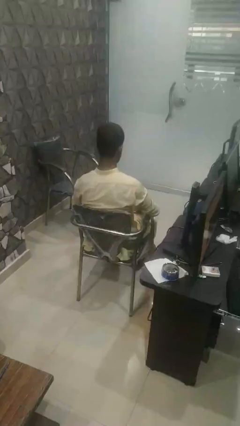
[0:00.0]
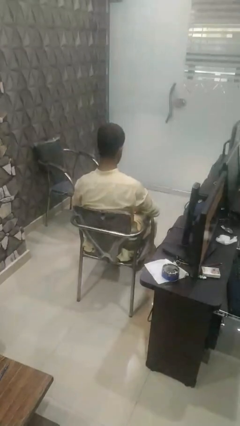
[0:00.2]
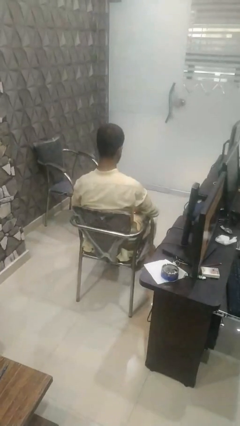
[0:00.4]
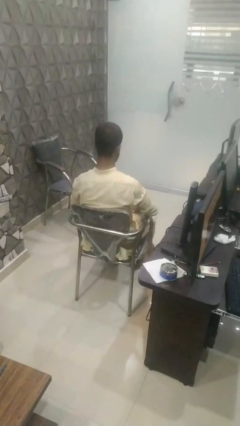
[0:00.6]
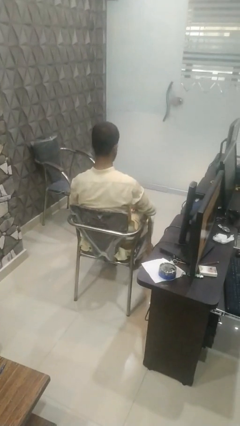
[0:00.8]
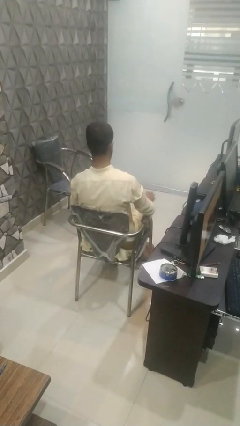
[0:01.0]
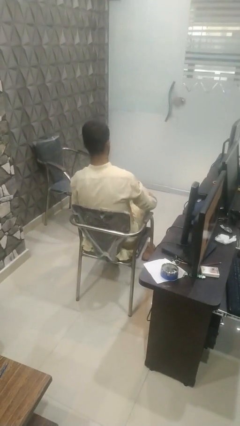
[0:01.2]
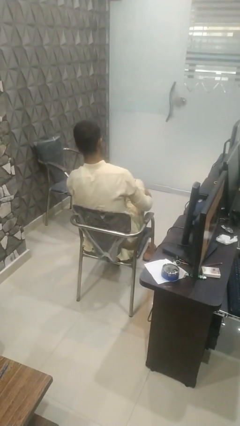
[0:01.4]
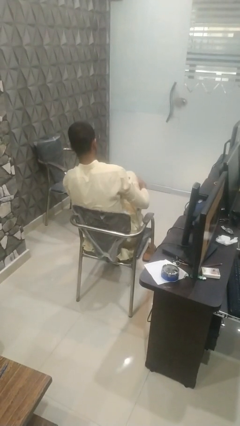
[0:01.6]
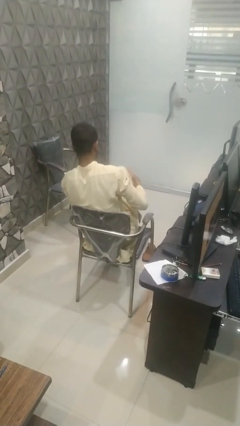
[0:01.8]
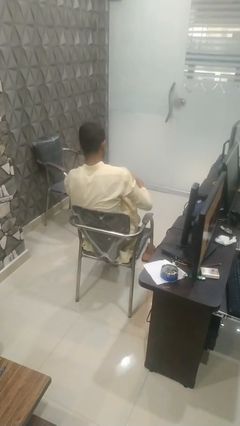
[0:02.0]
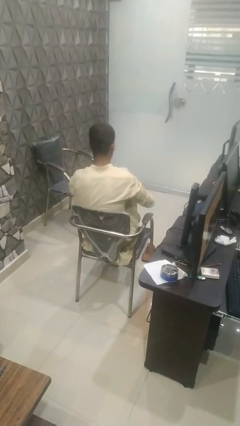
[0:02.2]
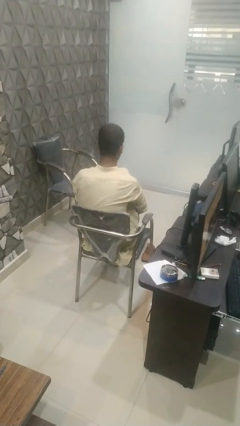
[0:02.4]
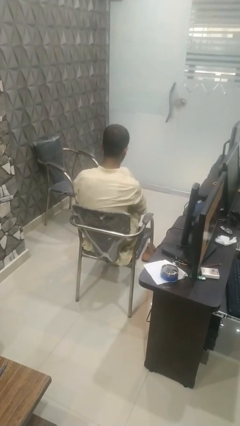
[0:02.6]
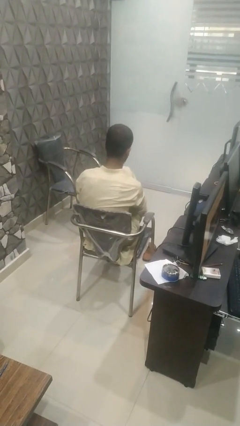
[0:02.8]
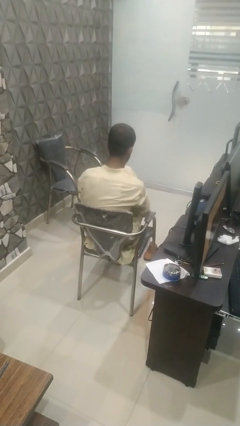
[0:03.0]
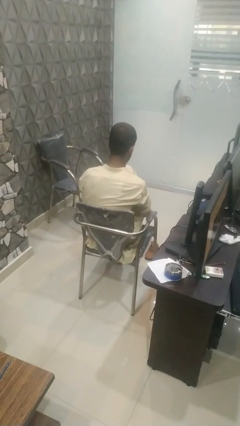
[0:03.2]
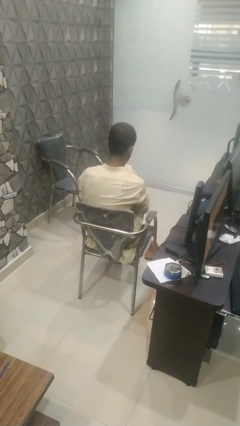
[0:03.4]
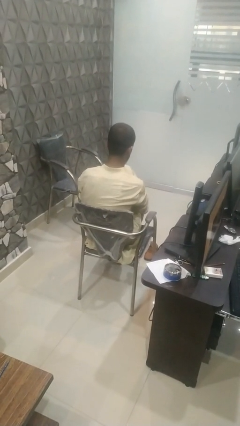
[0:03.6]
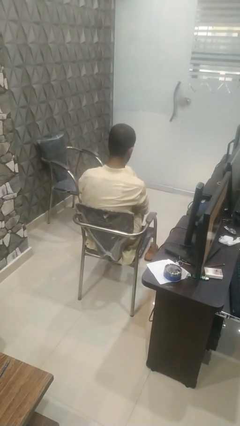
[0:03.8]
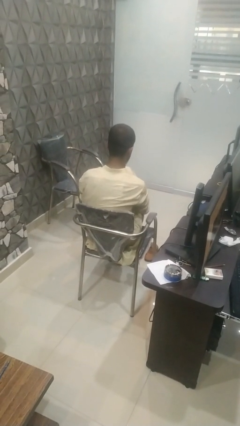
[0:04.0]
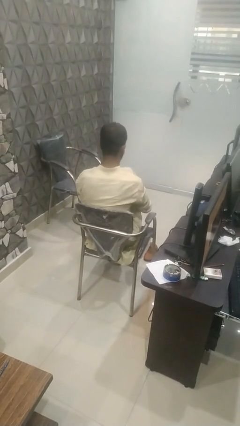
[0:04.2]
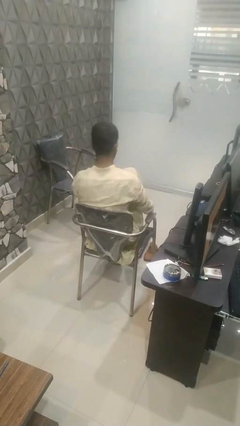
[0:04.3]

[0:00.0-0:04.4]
person rubs foot

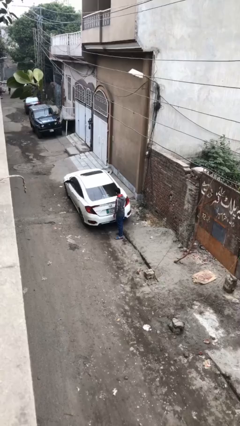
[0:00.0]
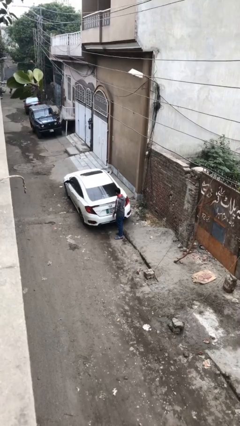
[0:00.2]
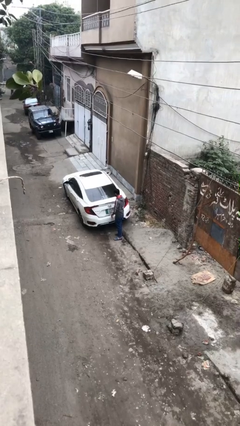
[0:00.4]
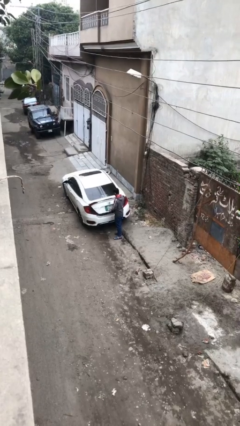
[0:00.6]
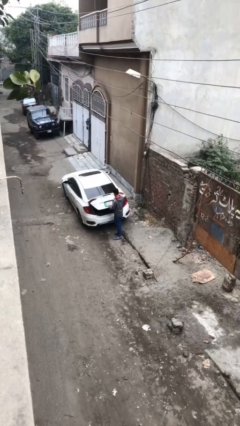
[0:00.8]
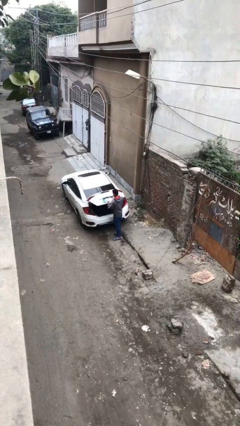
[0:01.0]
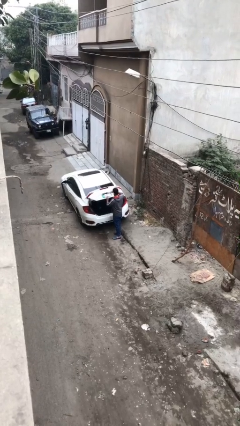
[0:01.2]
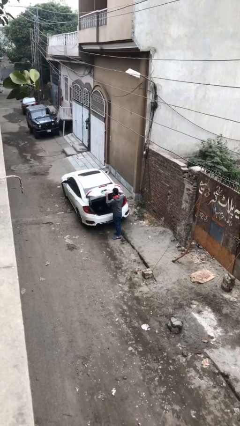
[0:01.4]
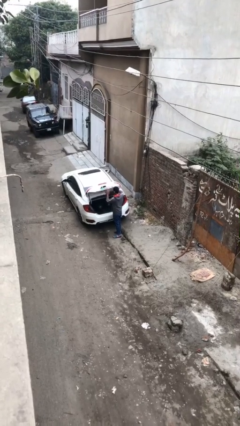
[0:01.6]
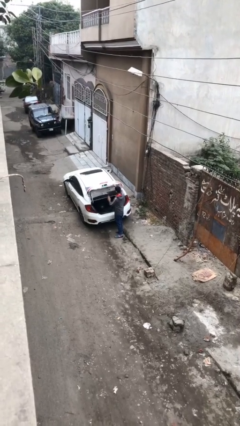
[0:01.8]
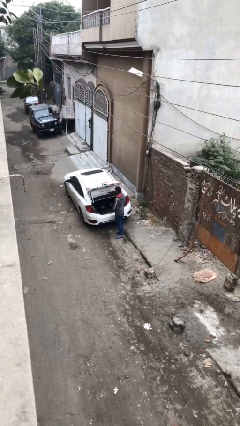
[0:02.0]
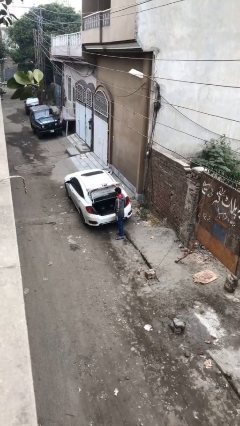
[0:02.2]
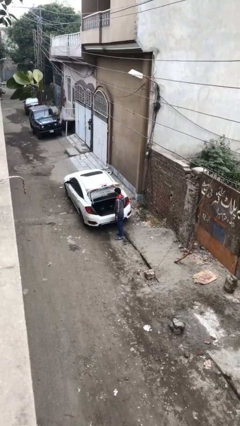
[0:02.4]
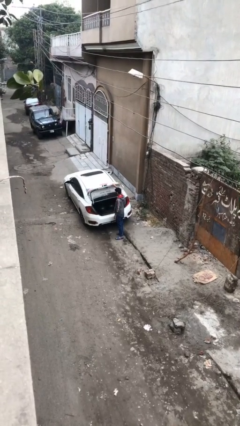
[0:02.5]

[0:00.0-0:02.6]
person opens car trunk

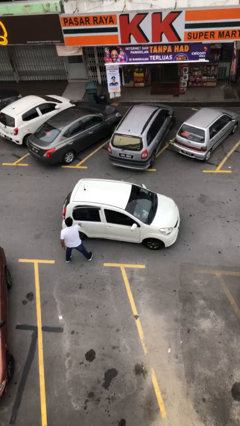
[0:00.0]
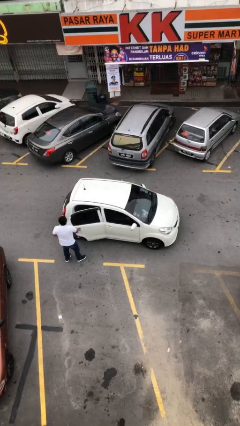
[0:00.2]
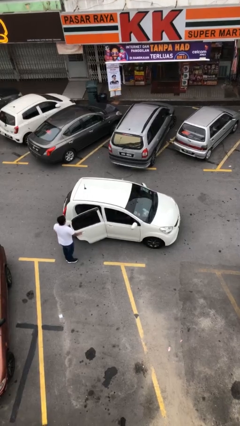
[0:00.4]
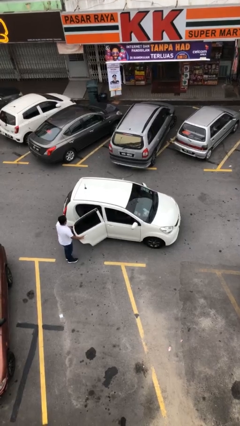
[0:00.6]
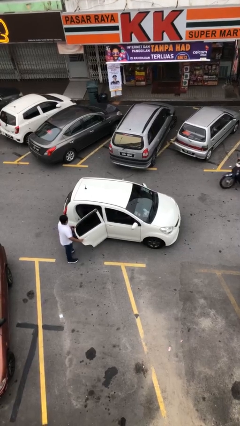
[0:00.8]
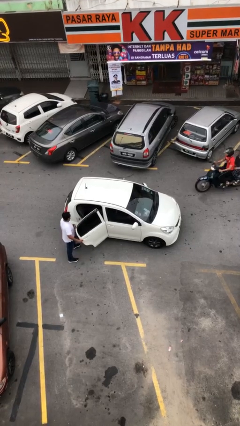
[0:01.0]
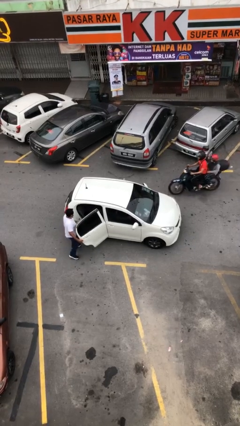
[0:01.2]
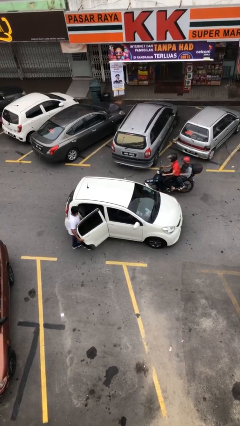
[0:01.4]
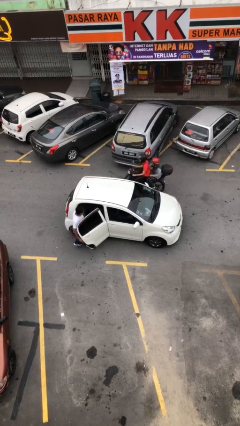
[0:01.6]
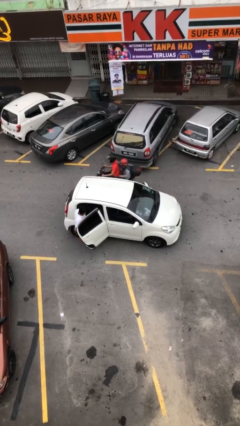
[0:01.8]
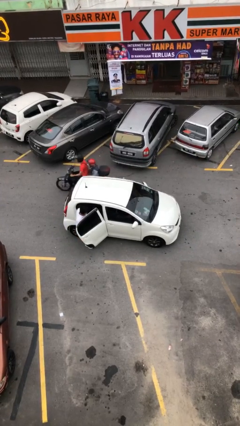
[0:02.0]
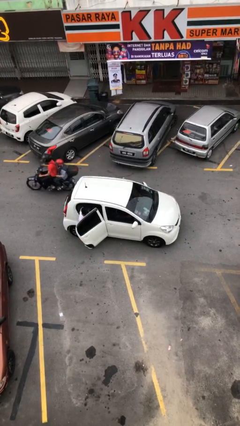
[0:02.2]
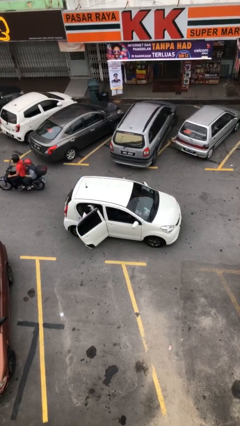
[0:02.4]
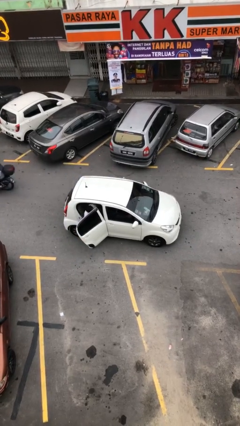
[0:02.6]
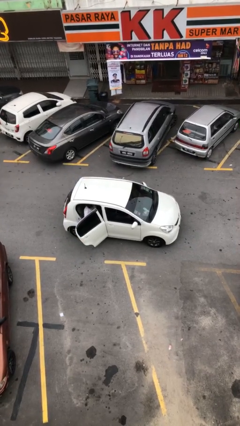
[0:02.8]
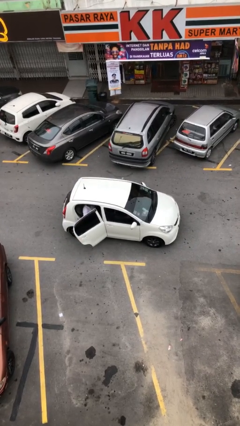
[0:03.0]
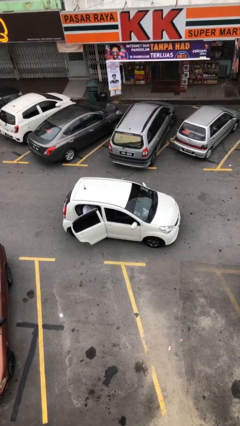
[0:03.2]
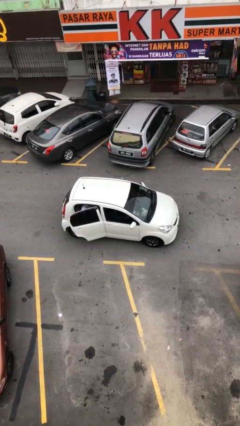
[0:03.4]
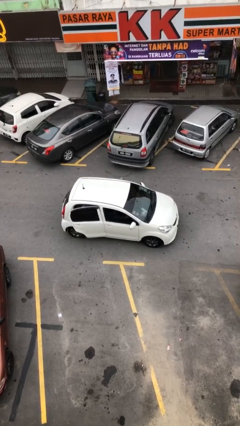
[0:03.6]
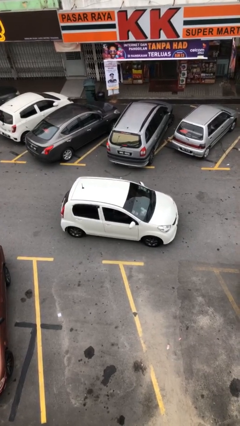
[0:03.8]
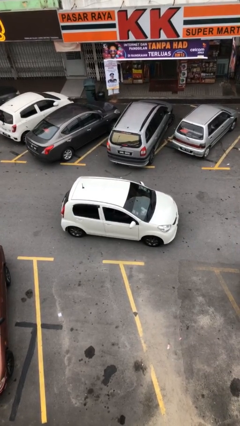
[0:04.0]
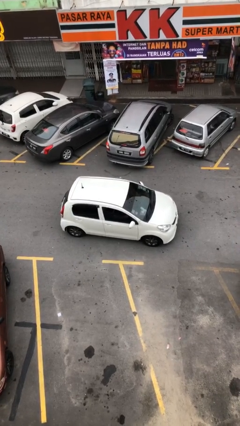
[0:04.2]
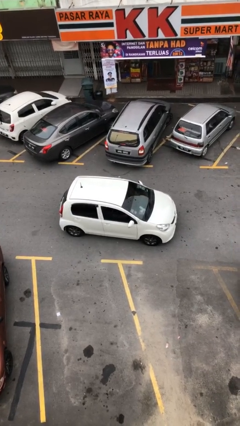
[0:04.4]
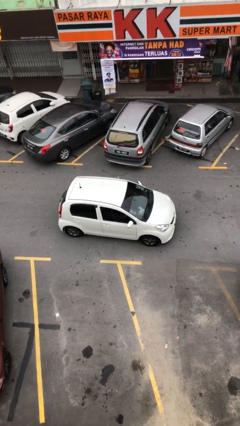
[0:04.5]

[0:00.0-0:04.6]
car picks up person

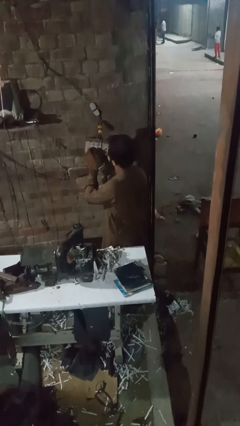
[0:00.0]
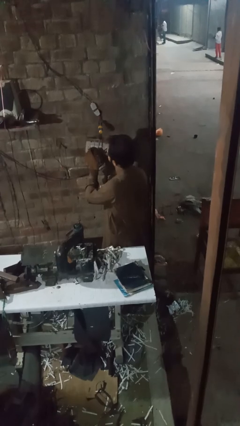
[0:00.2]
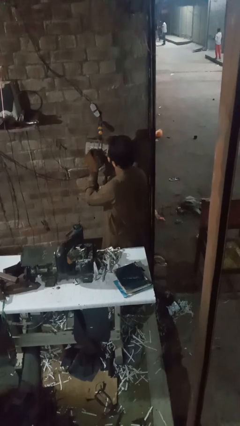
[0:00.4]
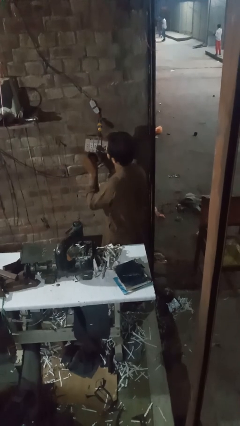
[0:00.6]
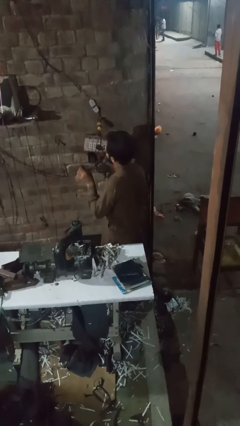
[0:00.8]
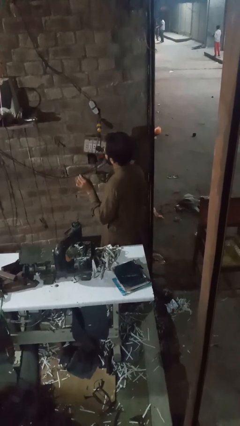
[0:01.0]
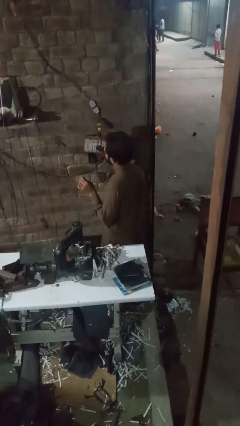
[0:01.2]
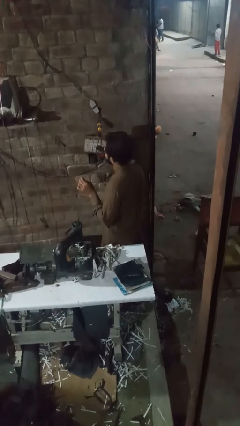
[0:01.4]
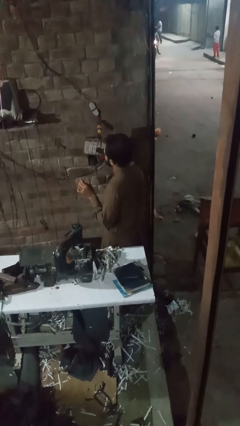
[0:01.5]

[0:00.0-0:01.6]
person unplugs from electrical socket

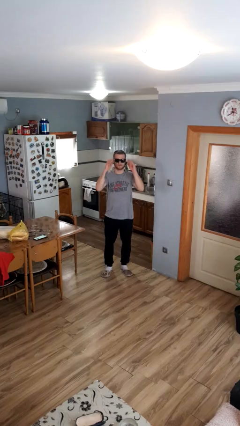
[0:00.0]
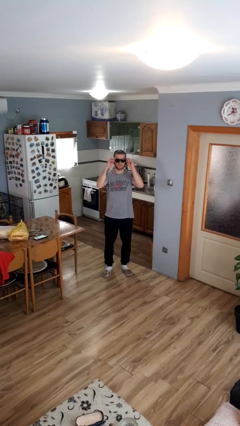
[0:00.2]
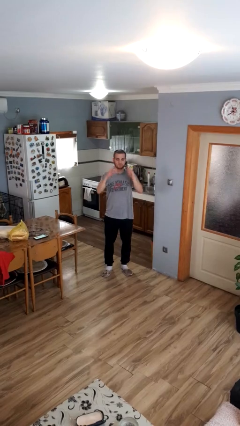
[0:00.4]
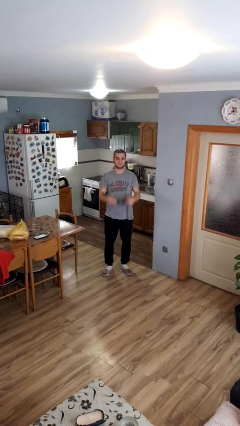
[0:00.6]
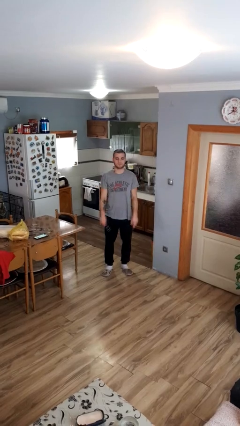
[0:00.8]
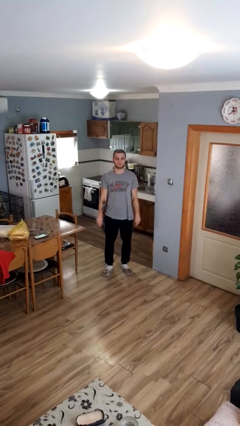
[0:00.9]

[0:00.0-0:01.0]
person takes off sunglasses

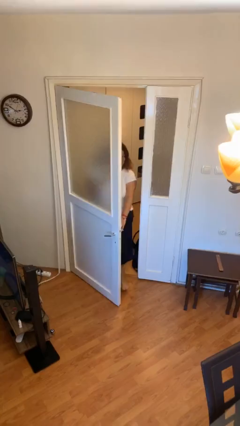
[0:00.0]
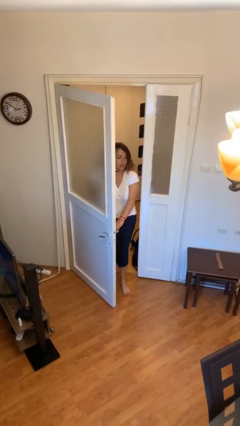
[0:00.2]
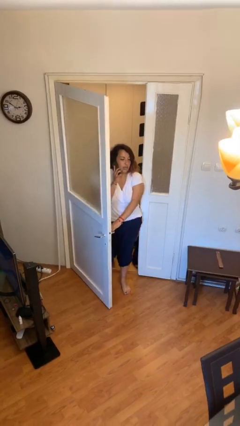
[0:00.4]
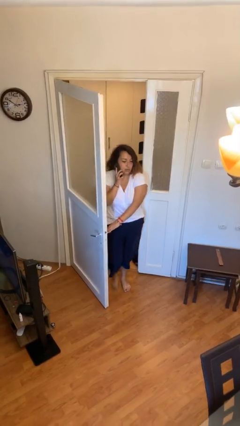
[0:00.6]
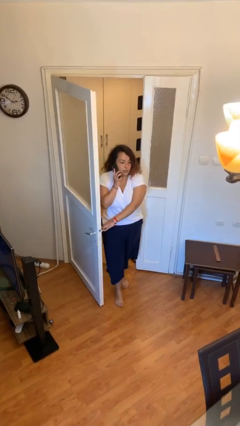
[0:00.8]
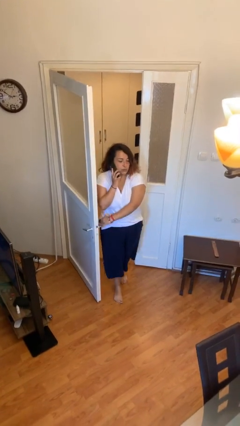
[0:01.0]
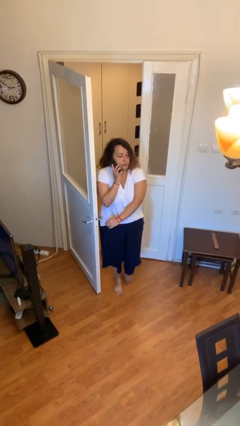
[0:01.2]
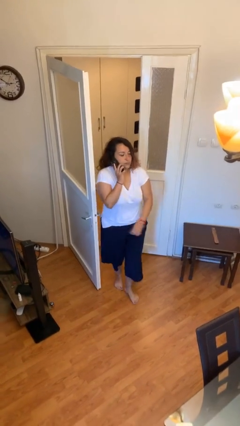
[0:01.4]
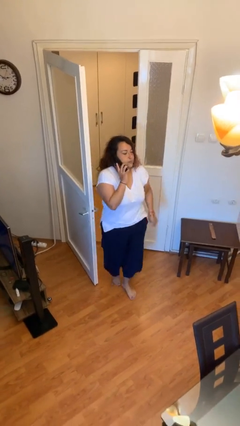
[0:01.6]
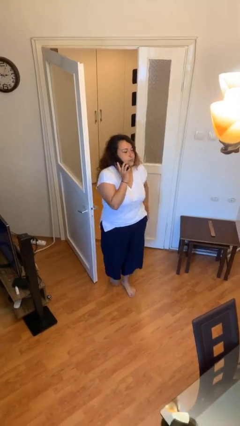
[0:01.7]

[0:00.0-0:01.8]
person enters scene through structure

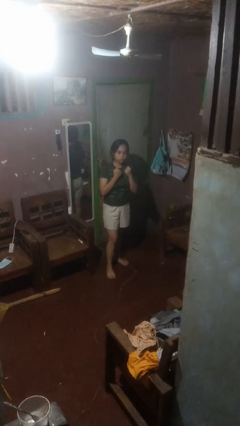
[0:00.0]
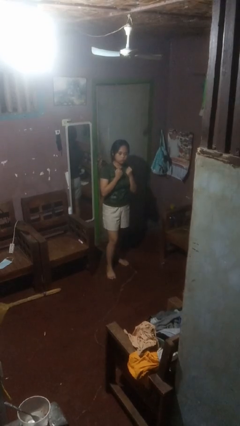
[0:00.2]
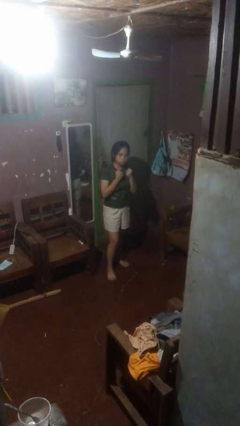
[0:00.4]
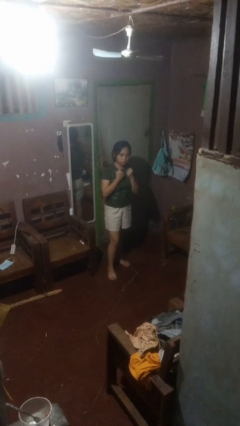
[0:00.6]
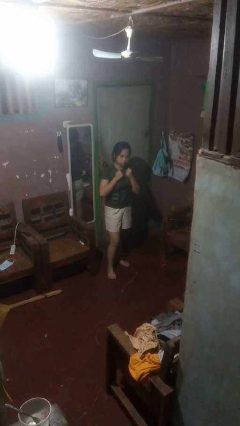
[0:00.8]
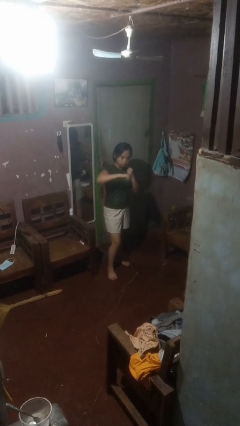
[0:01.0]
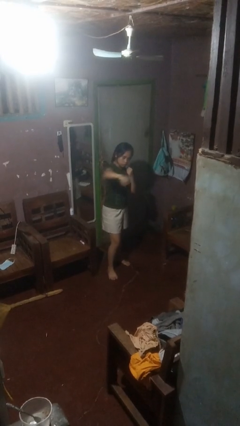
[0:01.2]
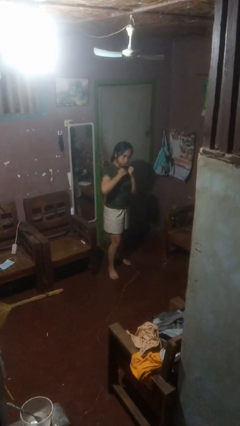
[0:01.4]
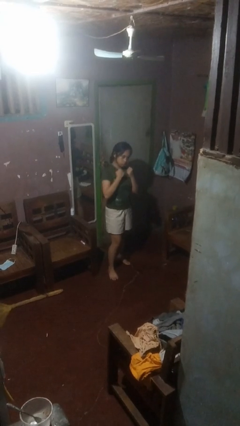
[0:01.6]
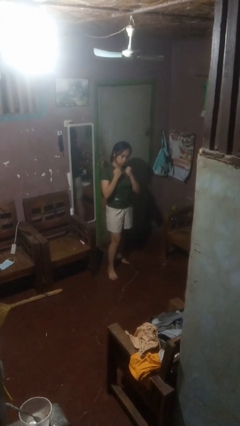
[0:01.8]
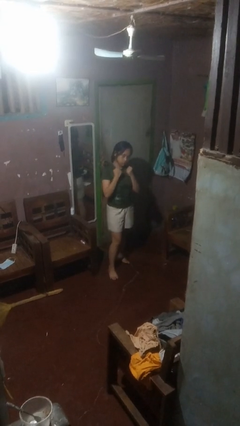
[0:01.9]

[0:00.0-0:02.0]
person punches
